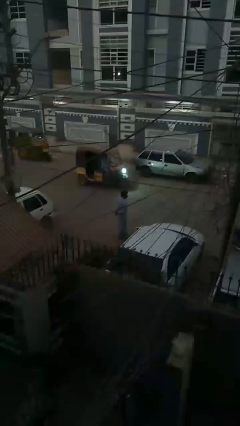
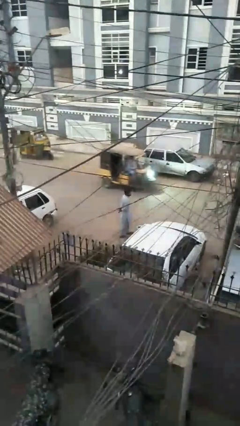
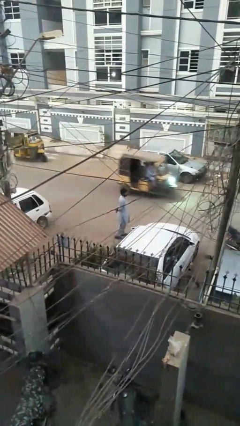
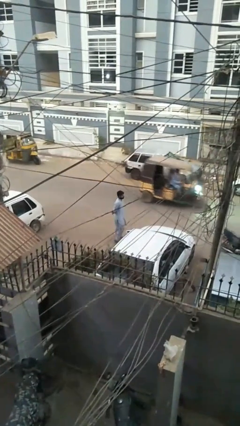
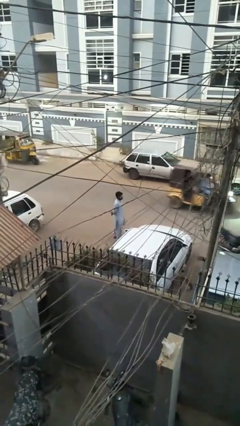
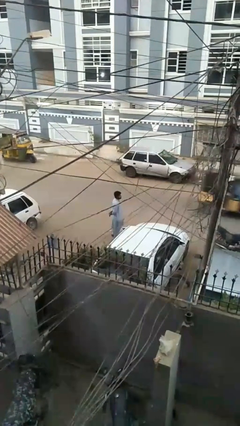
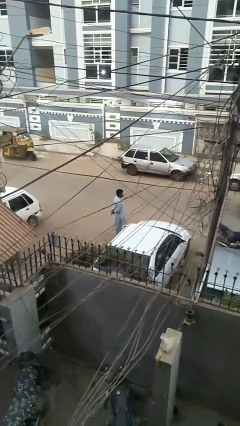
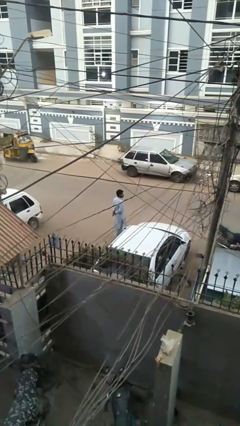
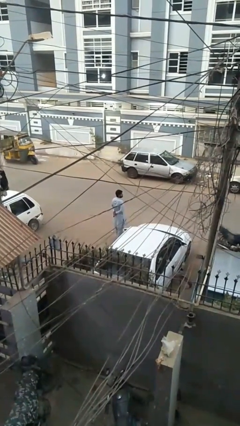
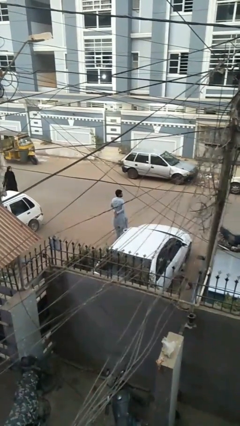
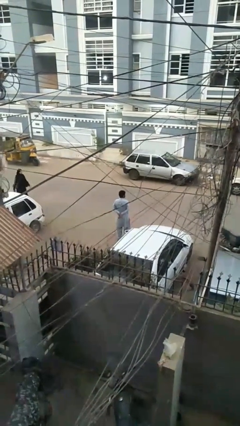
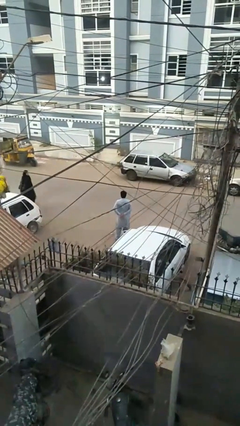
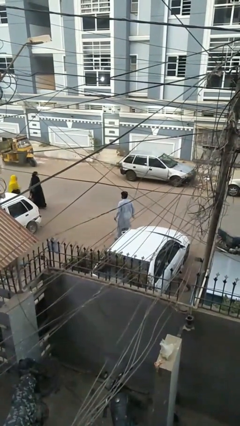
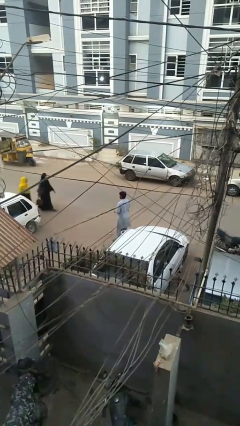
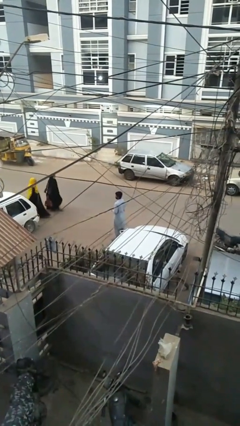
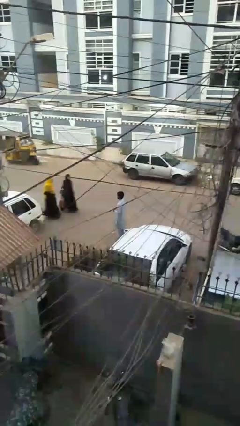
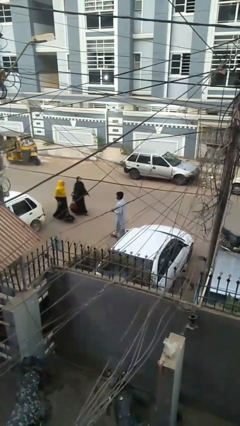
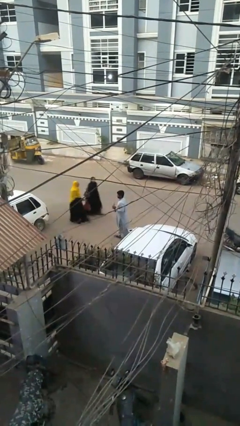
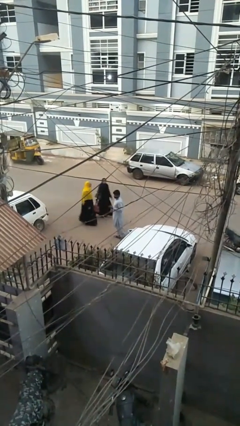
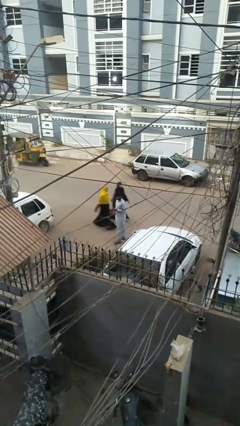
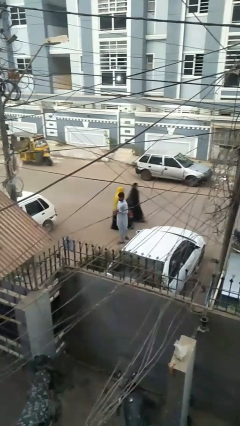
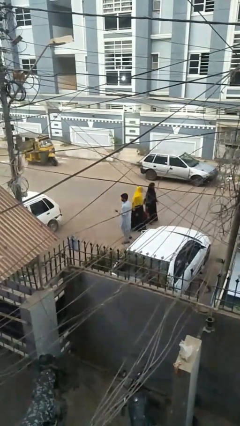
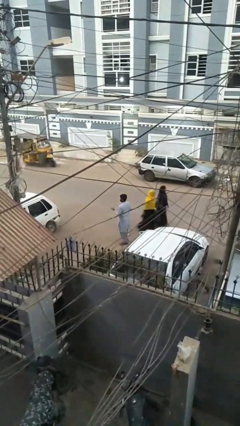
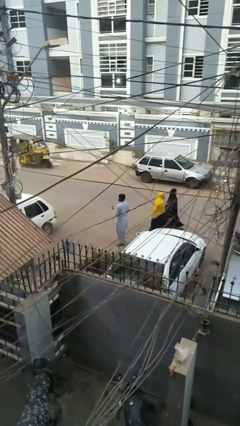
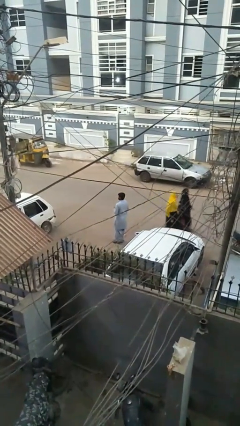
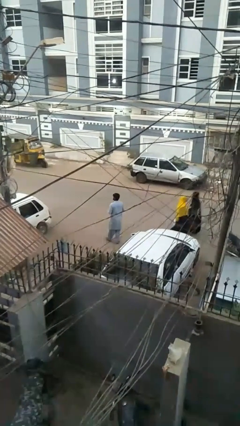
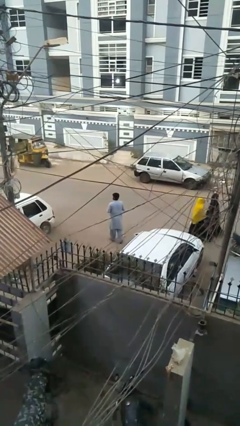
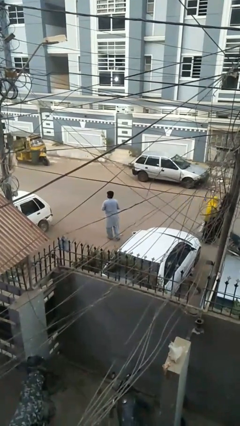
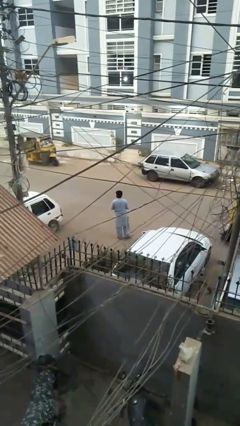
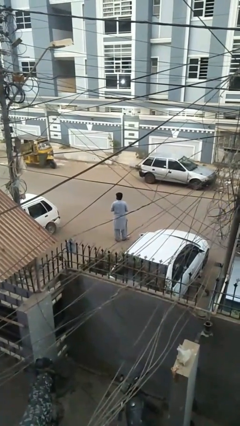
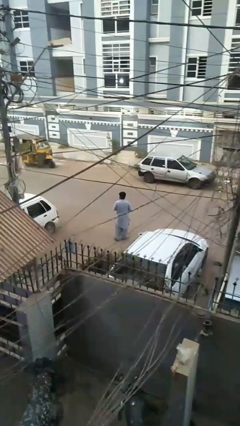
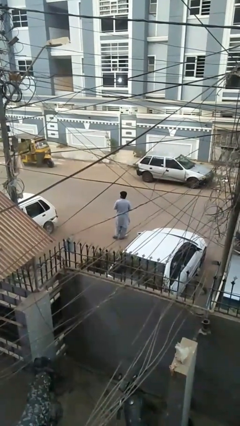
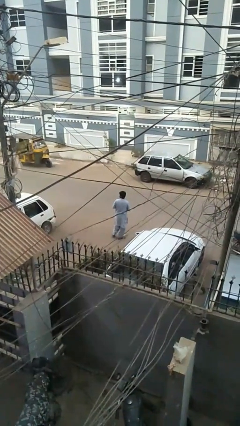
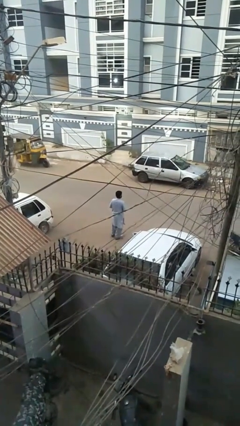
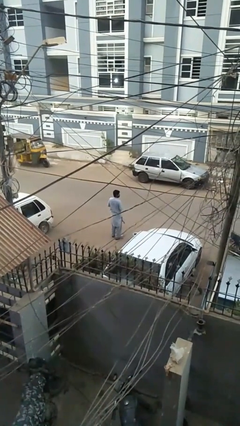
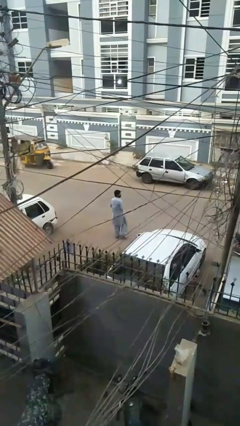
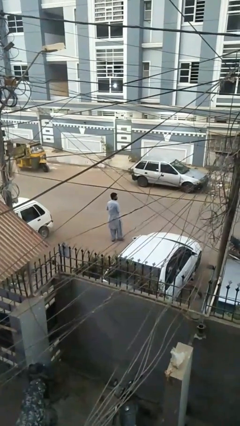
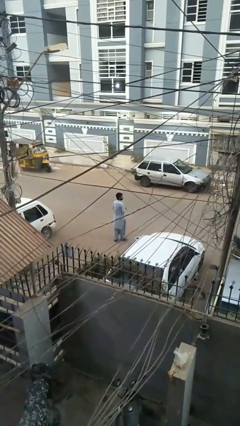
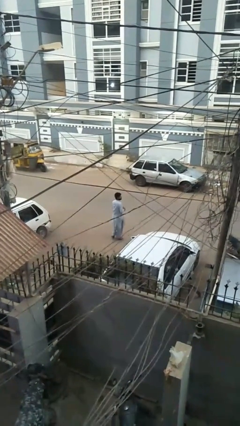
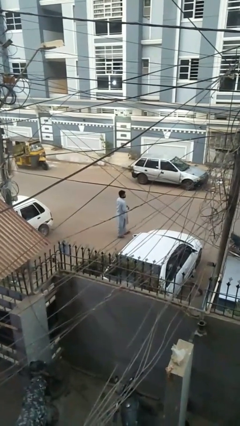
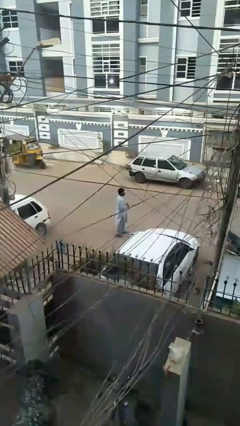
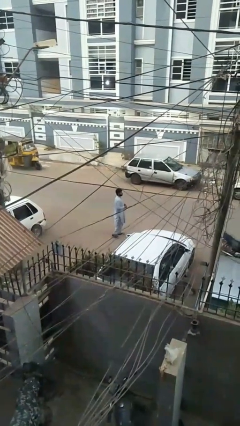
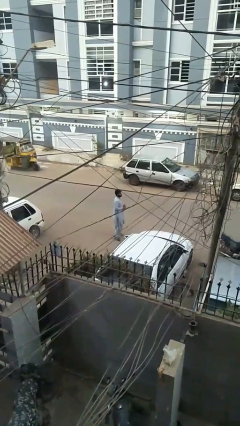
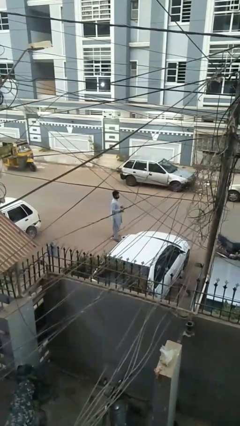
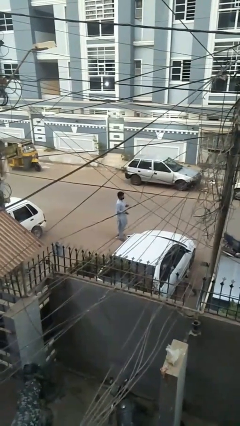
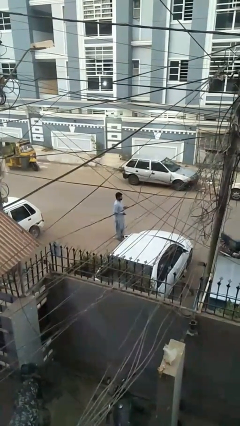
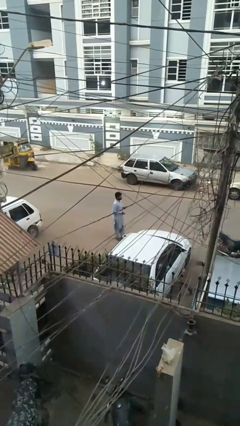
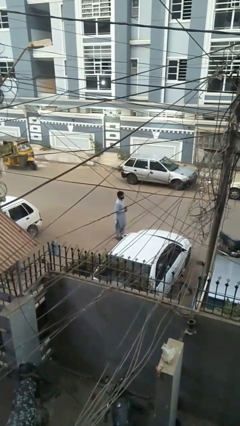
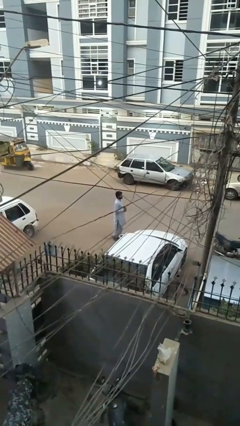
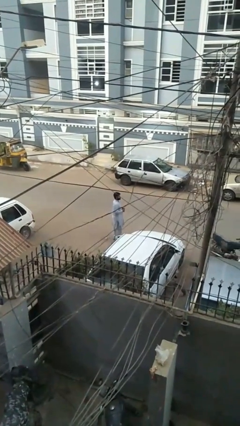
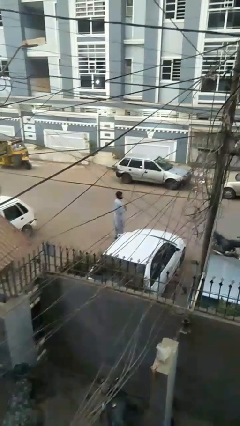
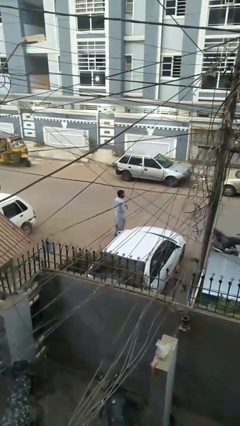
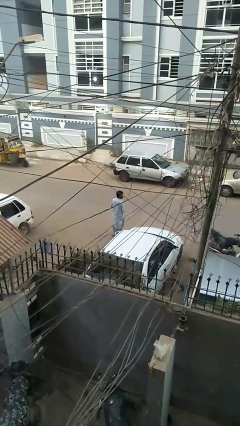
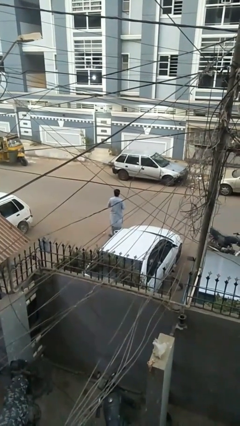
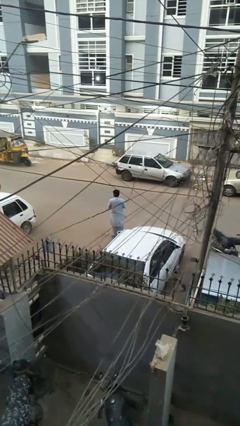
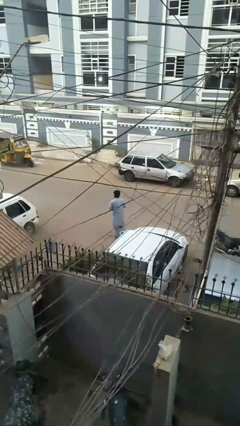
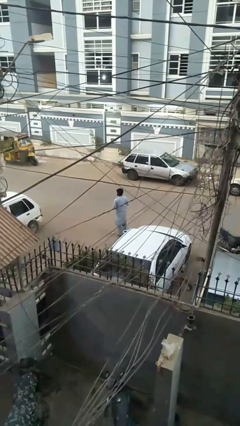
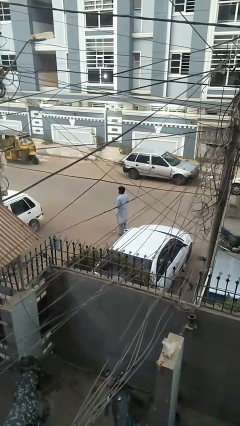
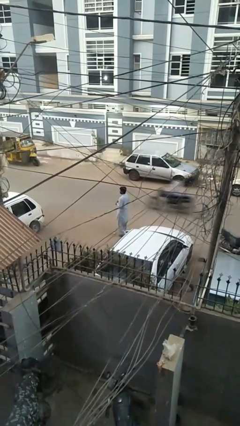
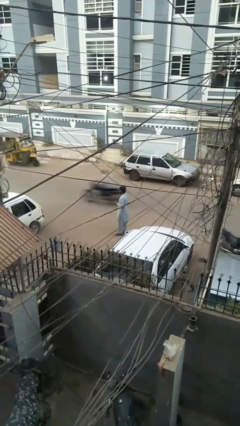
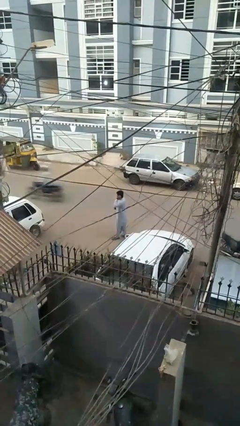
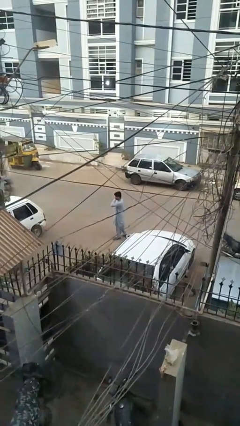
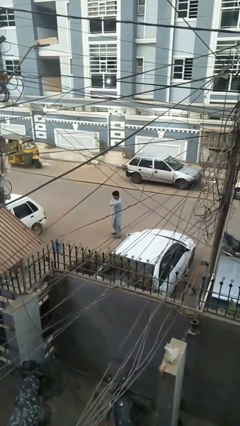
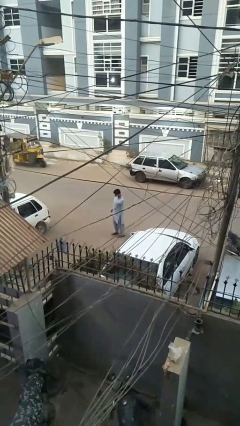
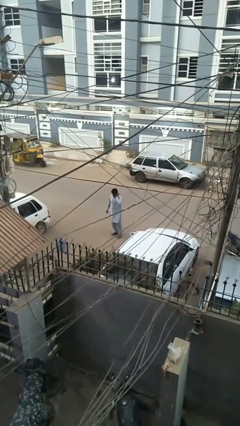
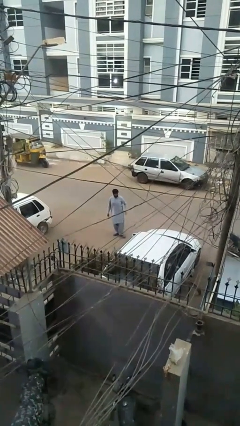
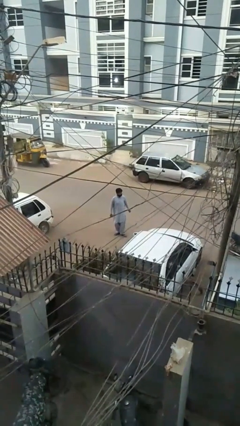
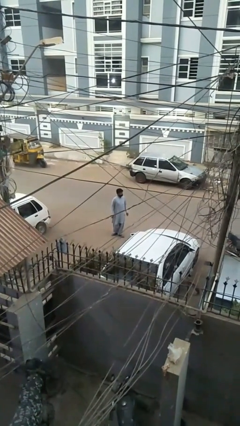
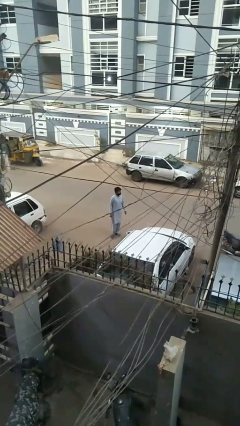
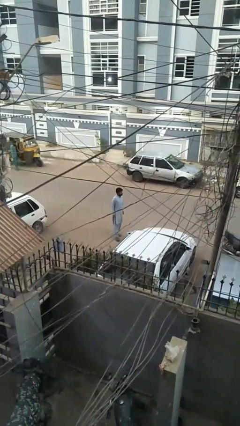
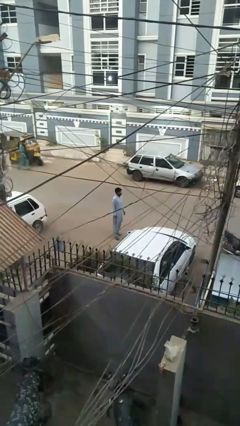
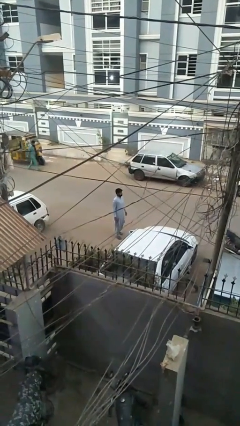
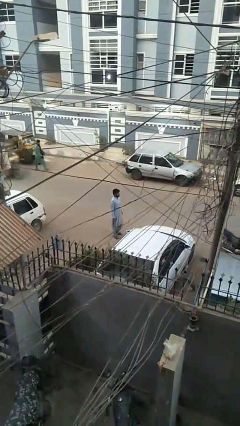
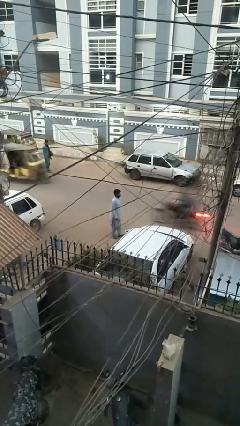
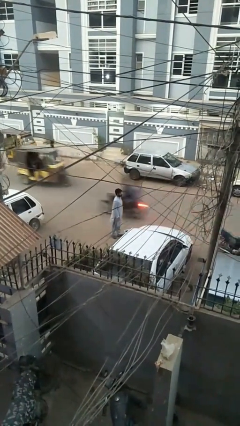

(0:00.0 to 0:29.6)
person walks

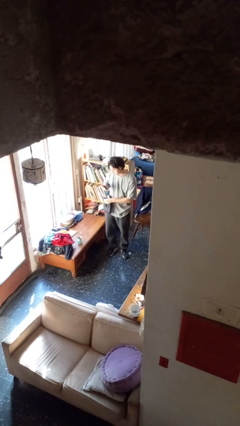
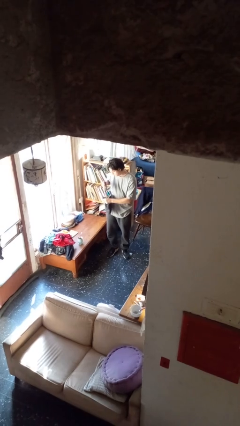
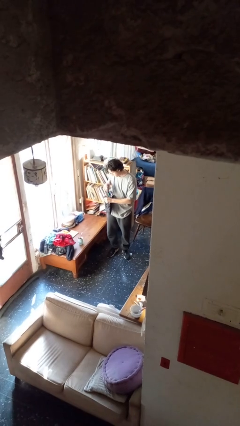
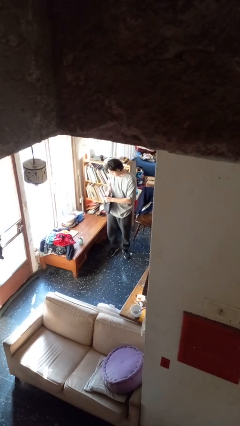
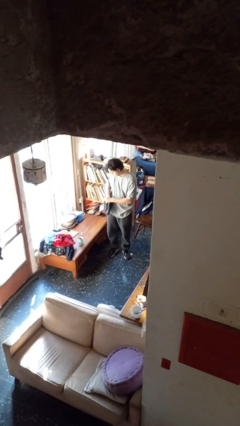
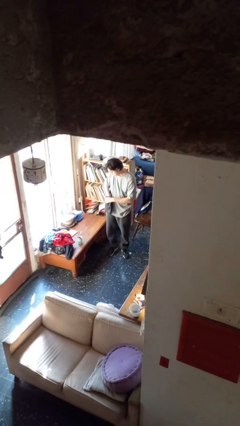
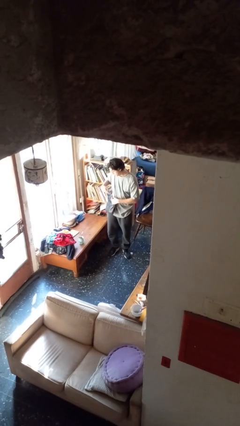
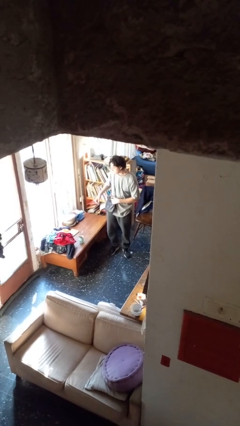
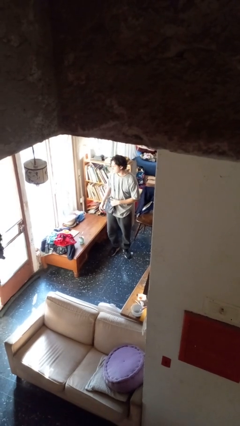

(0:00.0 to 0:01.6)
person puts object into purse

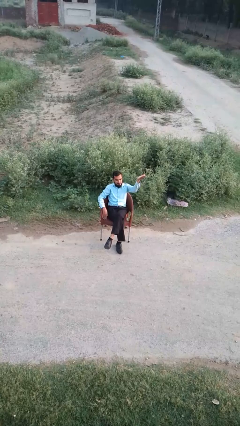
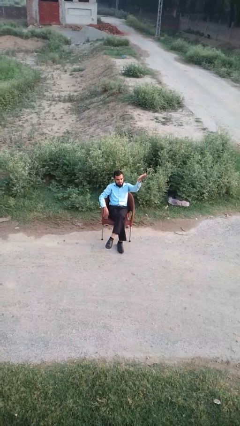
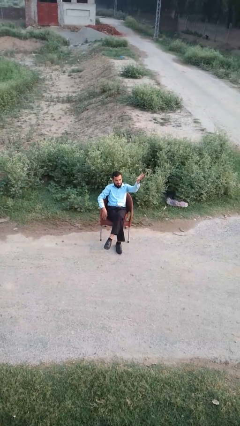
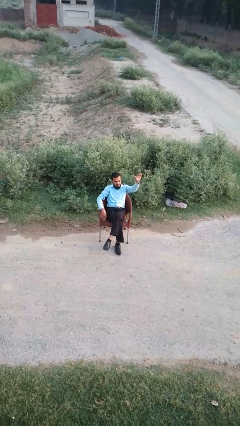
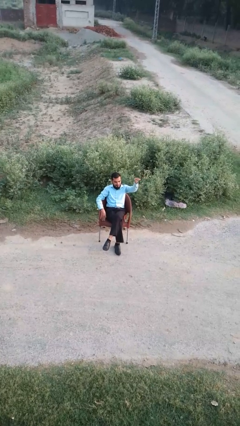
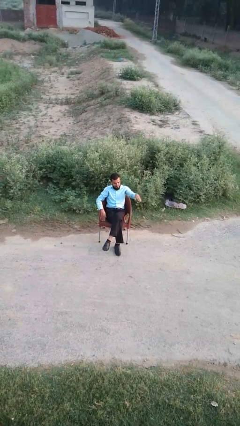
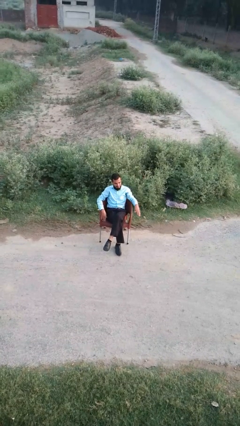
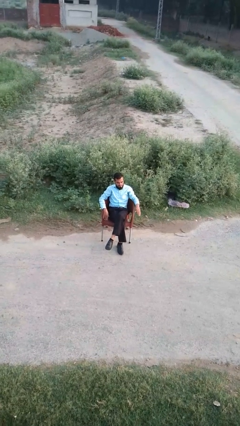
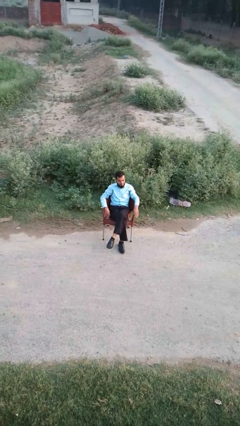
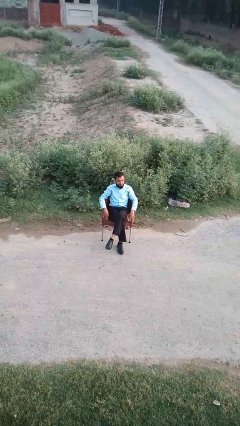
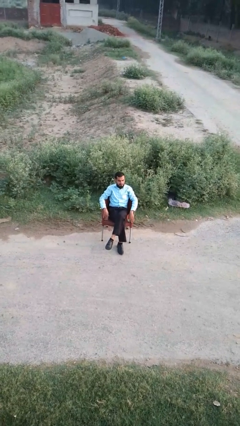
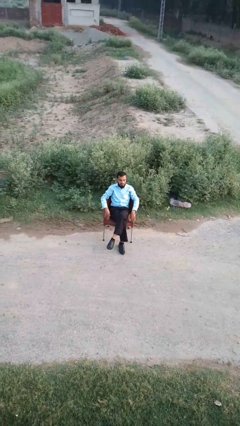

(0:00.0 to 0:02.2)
person gestures swipe down
